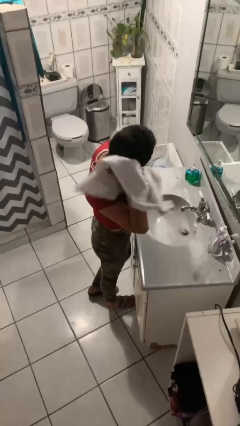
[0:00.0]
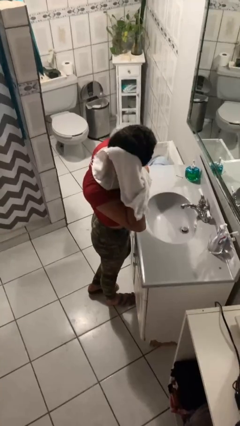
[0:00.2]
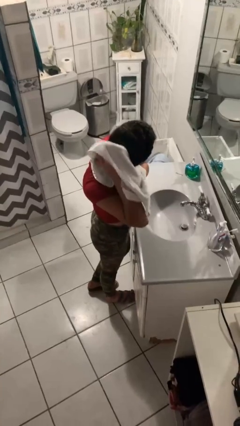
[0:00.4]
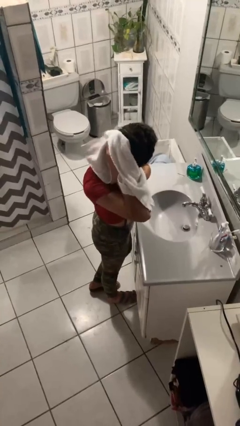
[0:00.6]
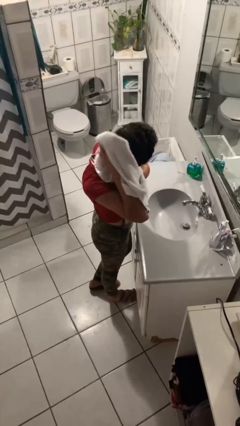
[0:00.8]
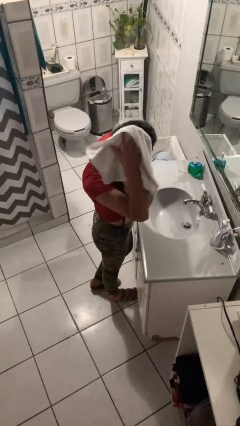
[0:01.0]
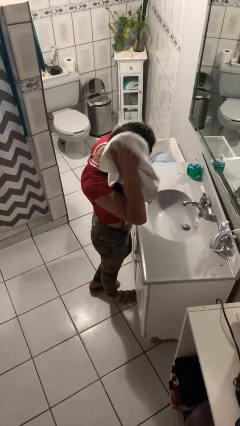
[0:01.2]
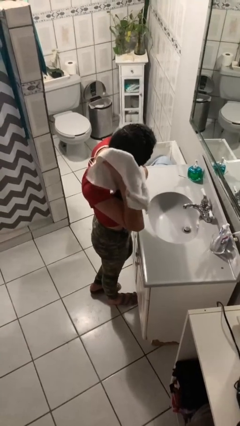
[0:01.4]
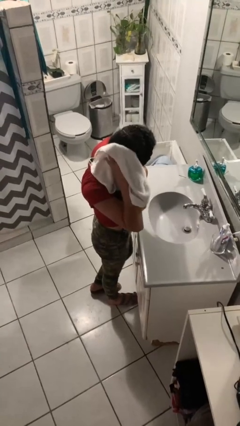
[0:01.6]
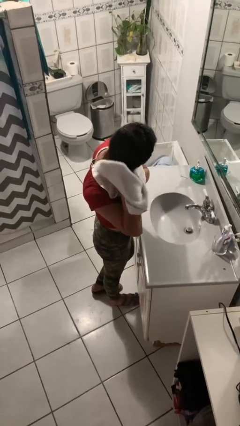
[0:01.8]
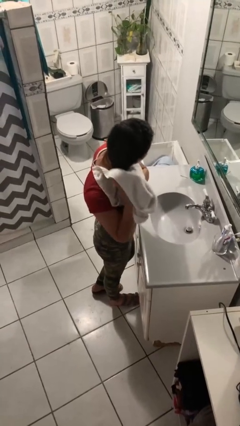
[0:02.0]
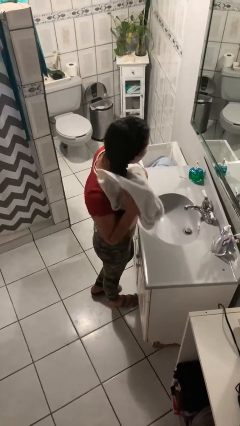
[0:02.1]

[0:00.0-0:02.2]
person dries hair with towel

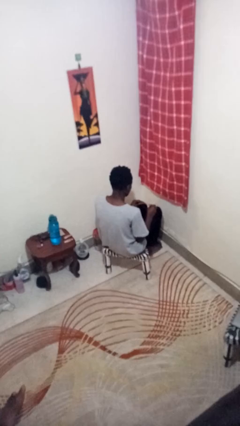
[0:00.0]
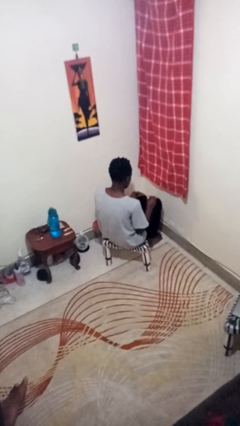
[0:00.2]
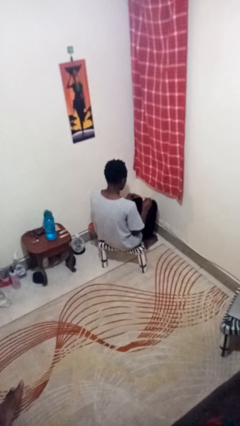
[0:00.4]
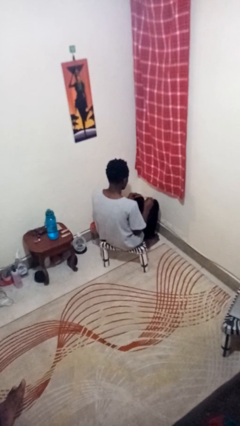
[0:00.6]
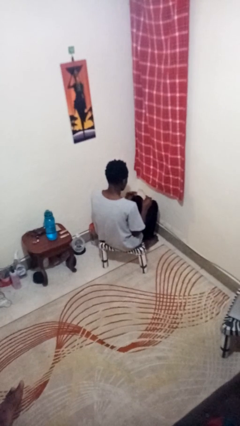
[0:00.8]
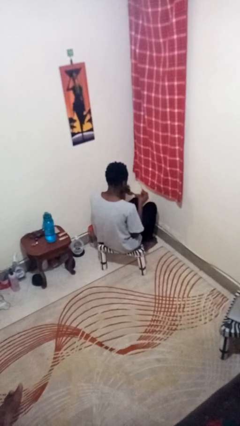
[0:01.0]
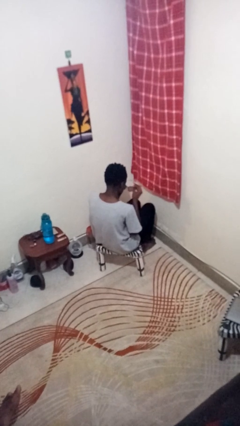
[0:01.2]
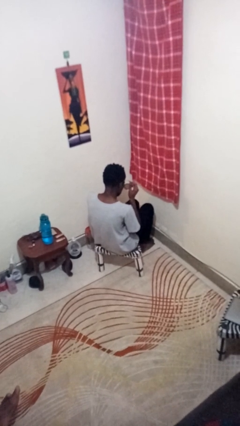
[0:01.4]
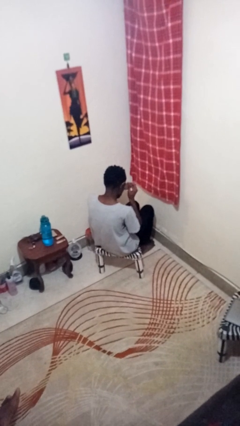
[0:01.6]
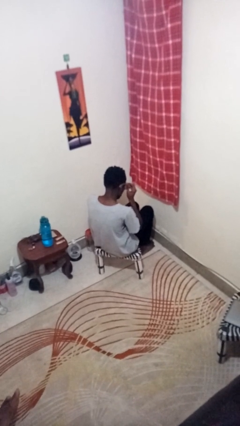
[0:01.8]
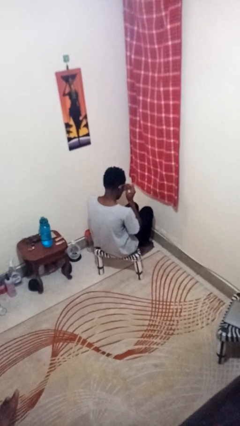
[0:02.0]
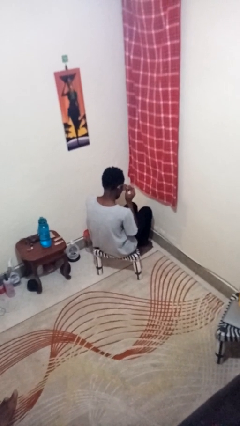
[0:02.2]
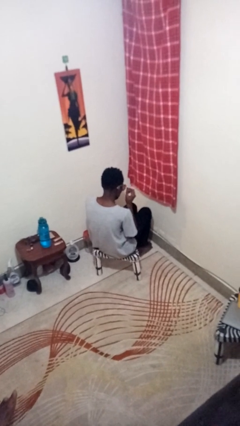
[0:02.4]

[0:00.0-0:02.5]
person puts on glasses

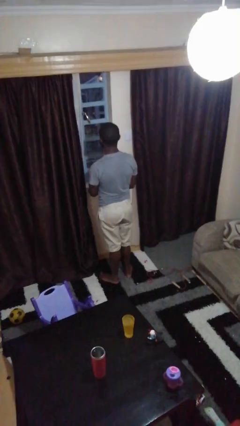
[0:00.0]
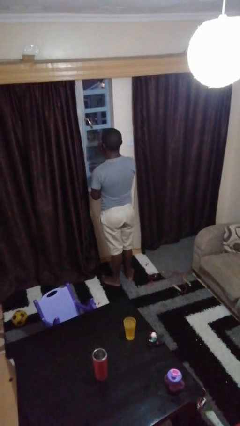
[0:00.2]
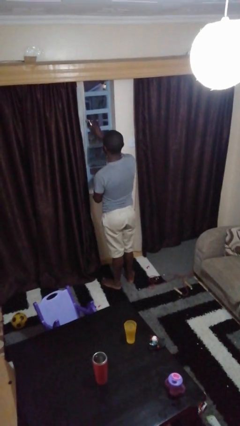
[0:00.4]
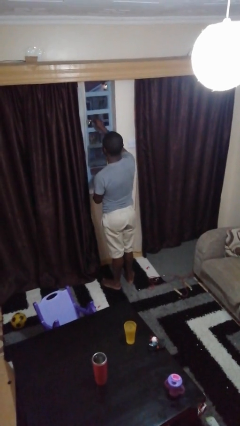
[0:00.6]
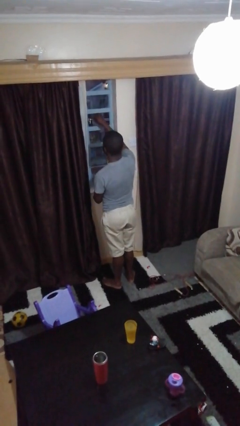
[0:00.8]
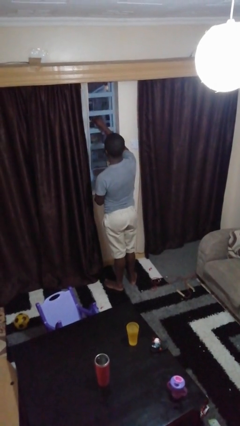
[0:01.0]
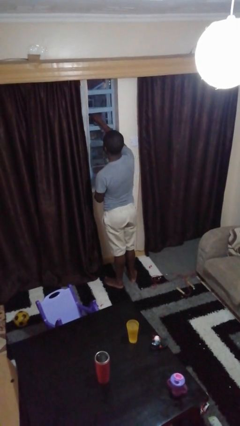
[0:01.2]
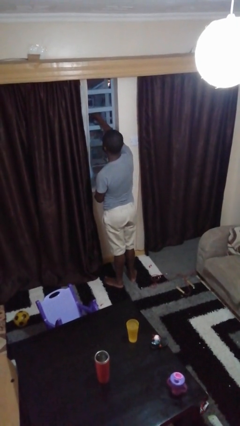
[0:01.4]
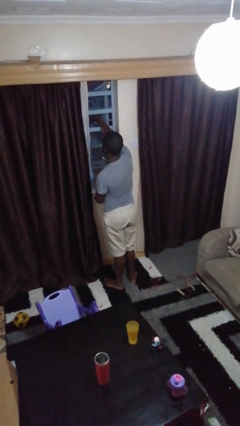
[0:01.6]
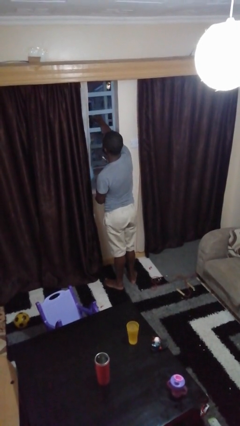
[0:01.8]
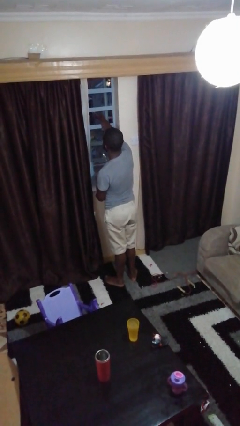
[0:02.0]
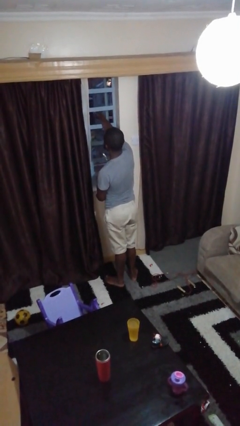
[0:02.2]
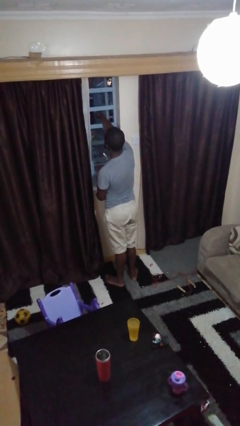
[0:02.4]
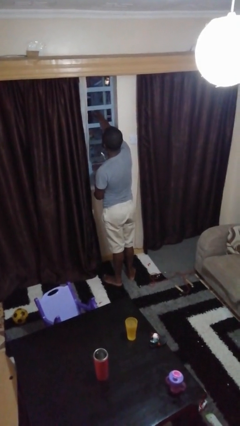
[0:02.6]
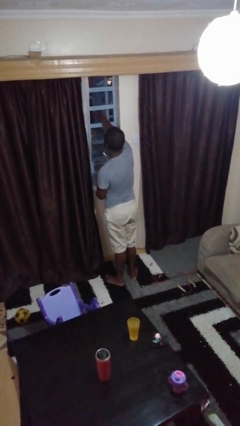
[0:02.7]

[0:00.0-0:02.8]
person opens home window

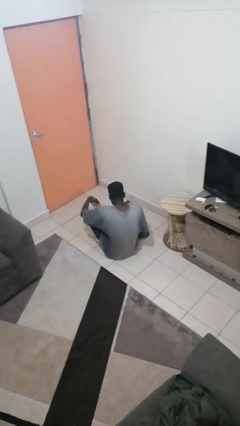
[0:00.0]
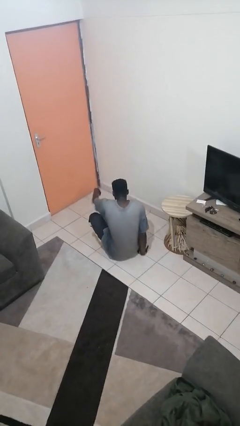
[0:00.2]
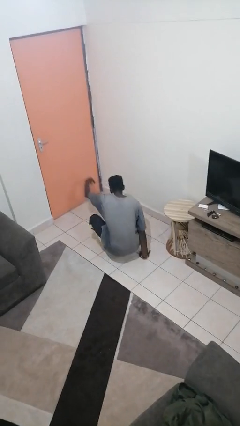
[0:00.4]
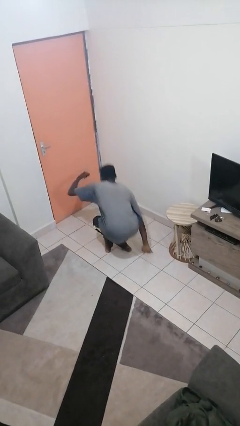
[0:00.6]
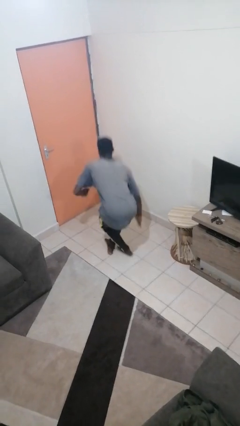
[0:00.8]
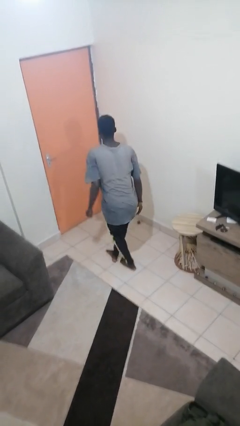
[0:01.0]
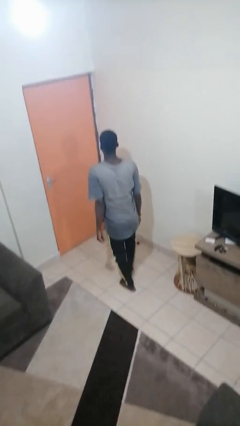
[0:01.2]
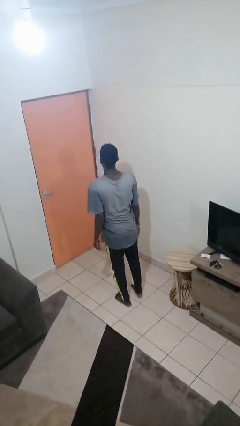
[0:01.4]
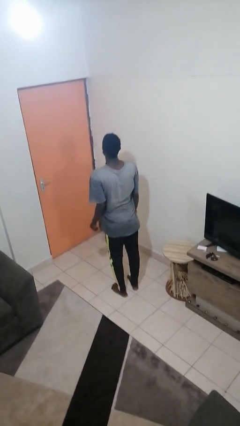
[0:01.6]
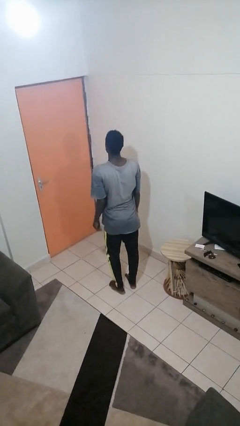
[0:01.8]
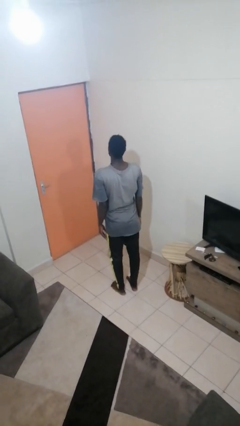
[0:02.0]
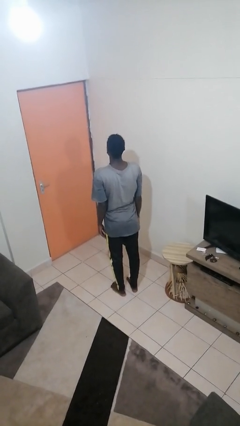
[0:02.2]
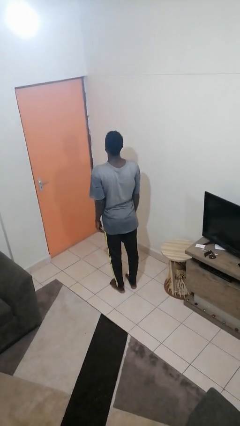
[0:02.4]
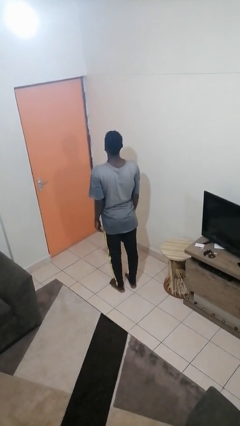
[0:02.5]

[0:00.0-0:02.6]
person stands up from floor

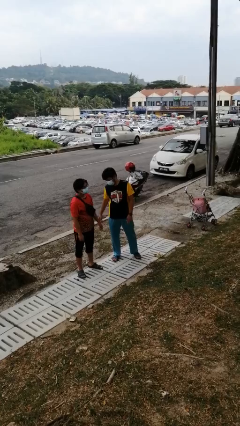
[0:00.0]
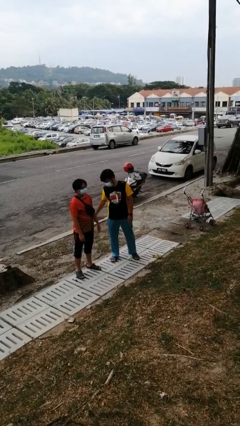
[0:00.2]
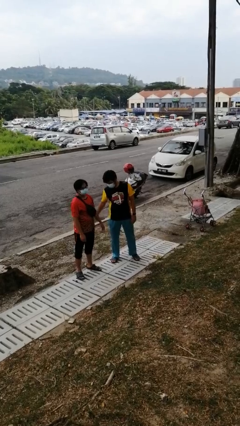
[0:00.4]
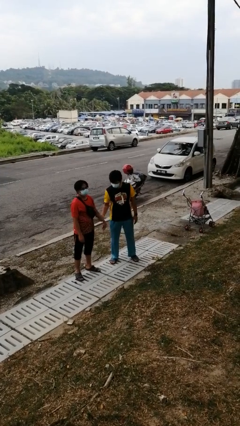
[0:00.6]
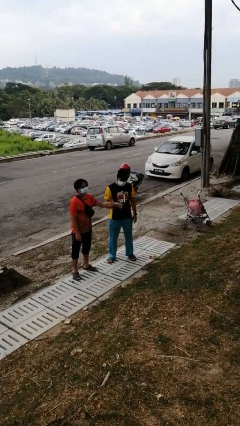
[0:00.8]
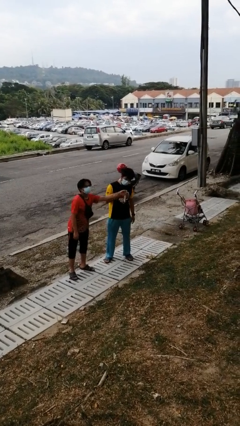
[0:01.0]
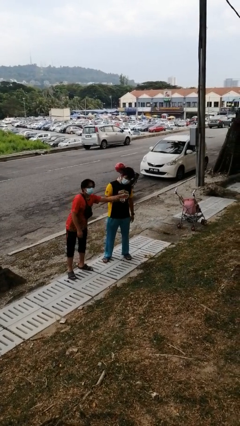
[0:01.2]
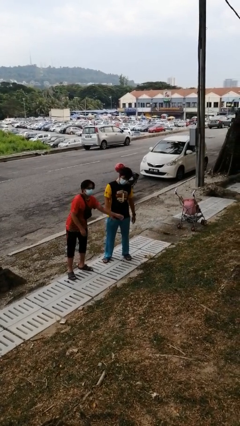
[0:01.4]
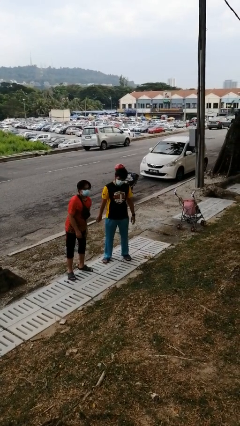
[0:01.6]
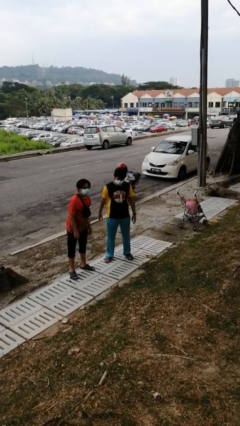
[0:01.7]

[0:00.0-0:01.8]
person grabs person by forearm

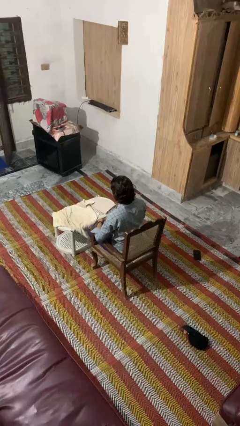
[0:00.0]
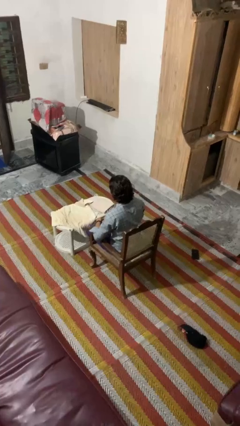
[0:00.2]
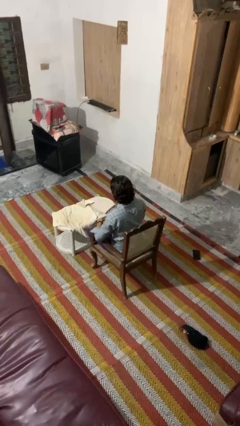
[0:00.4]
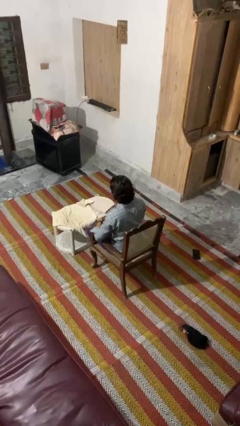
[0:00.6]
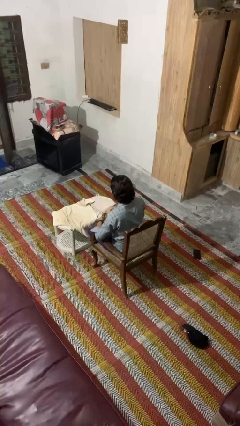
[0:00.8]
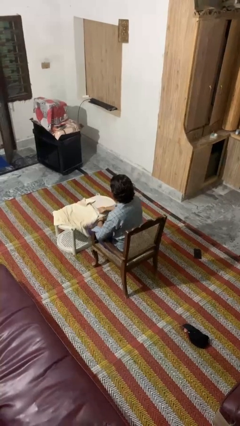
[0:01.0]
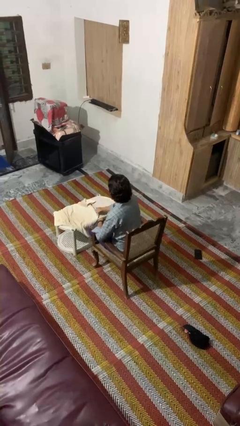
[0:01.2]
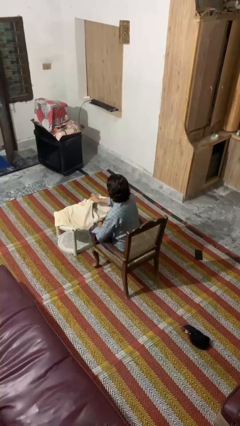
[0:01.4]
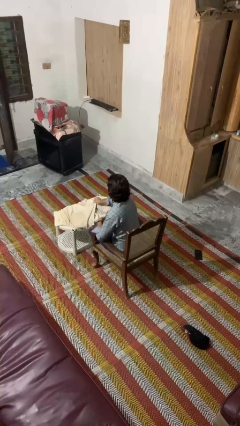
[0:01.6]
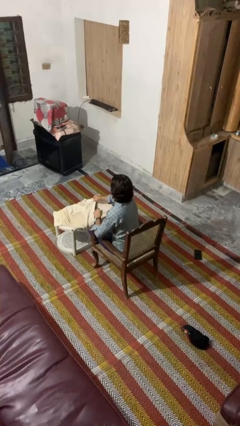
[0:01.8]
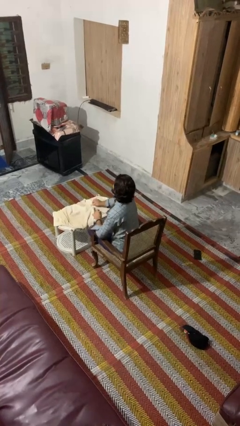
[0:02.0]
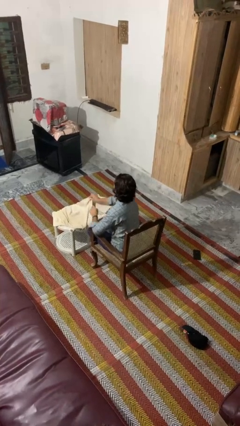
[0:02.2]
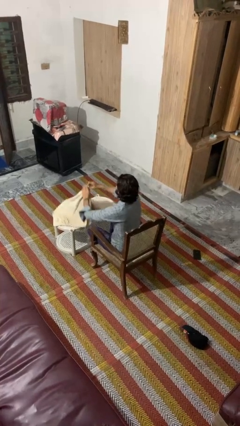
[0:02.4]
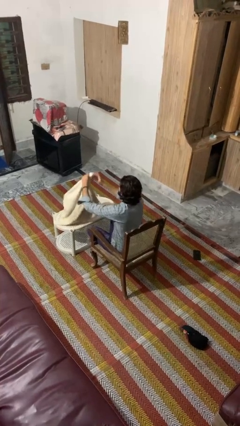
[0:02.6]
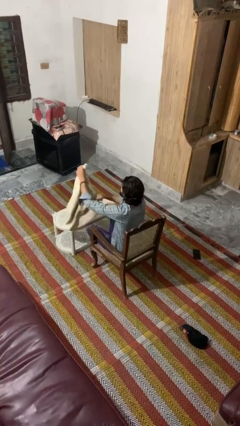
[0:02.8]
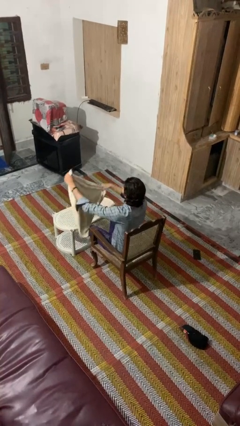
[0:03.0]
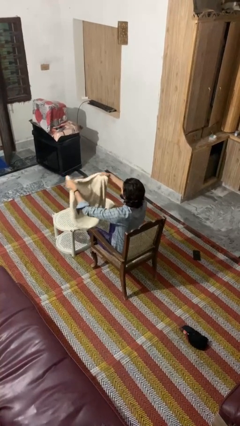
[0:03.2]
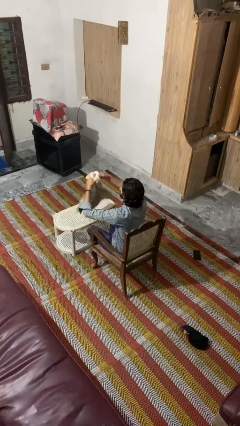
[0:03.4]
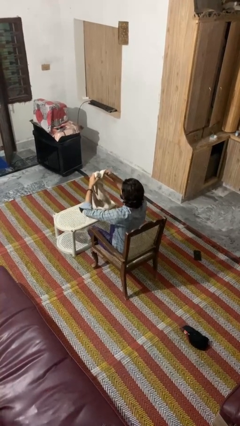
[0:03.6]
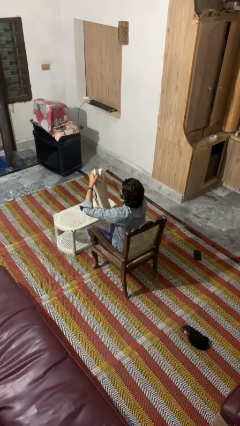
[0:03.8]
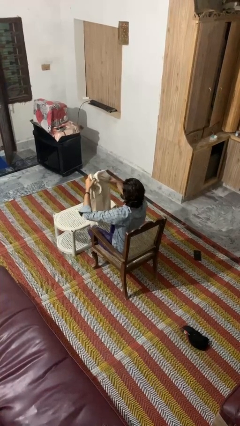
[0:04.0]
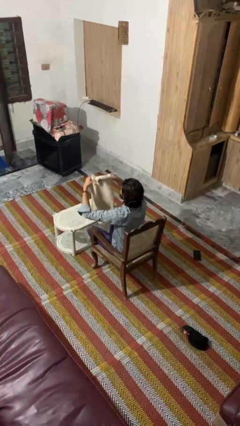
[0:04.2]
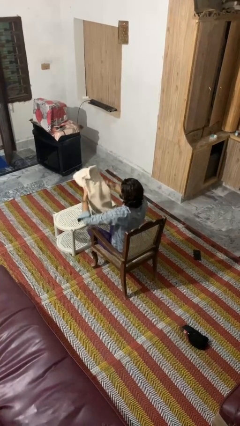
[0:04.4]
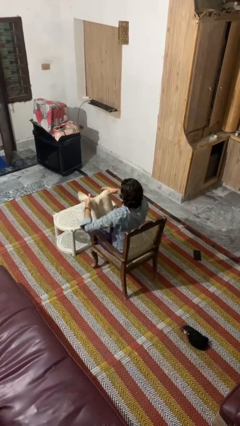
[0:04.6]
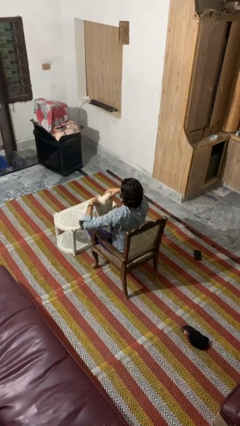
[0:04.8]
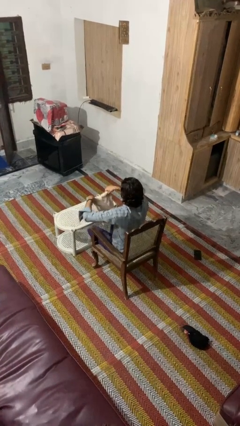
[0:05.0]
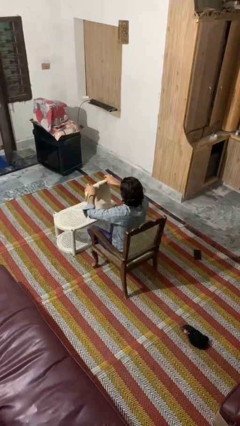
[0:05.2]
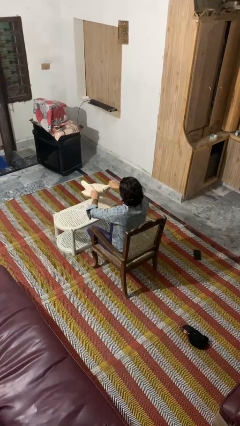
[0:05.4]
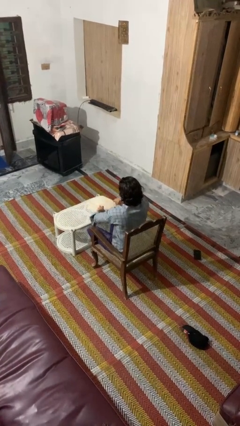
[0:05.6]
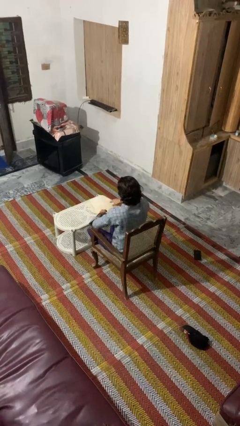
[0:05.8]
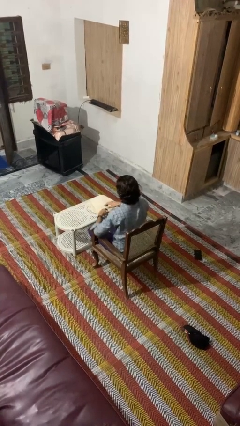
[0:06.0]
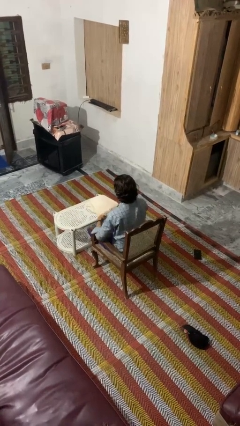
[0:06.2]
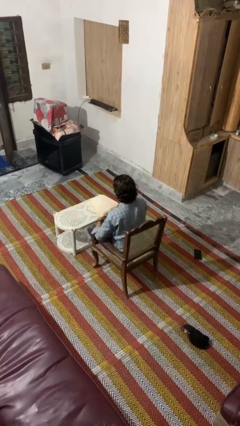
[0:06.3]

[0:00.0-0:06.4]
person folds towel
